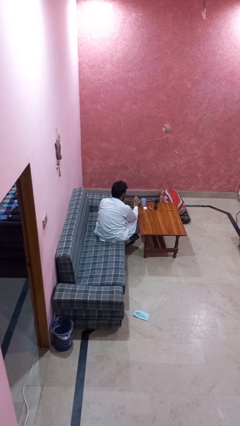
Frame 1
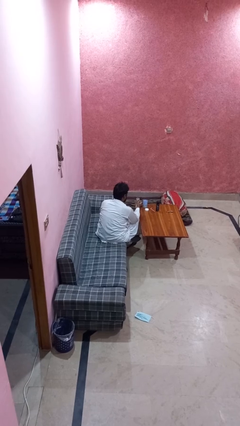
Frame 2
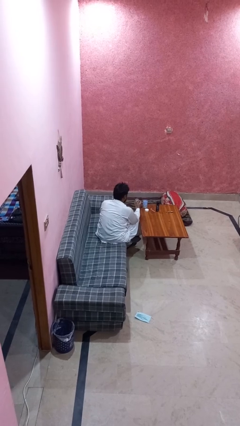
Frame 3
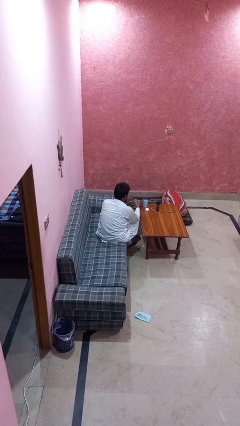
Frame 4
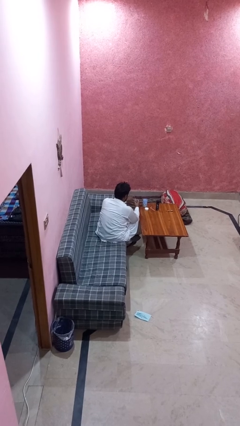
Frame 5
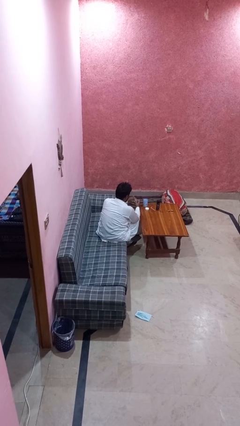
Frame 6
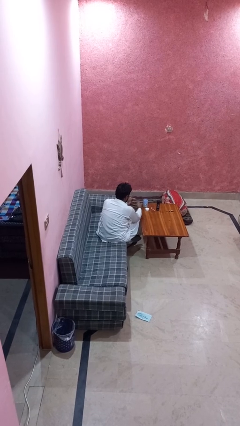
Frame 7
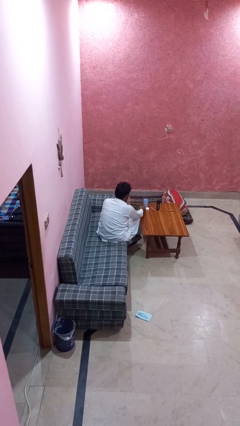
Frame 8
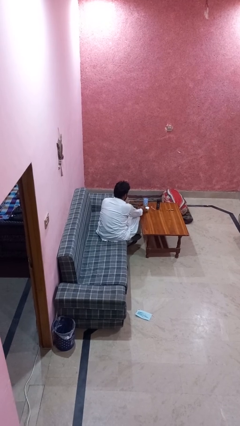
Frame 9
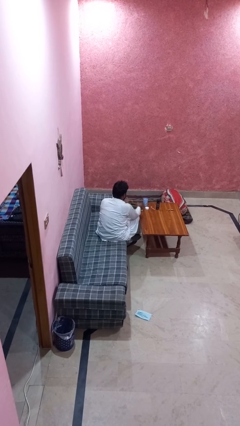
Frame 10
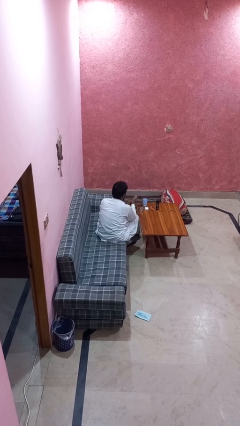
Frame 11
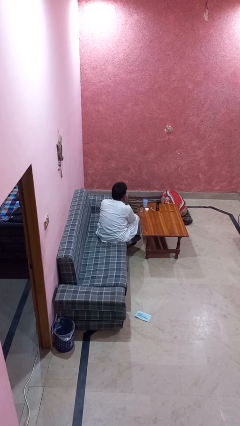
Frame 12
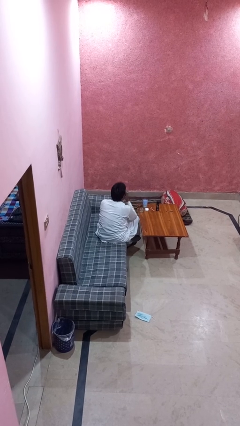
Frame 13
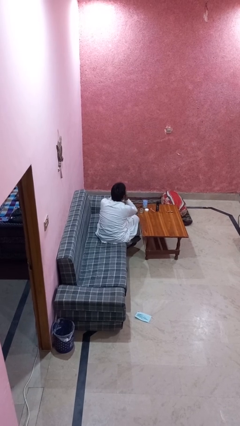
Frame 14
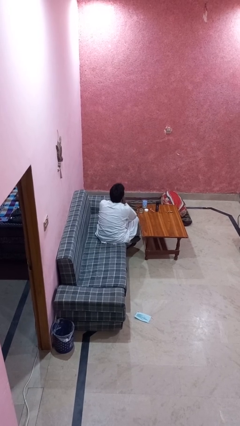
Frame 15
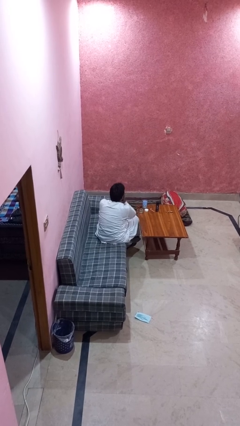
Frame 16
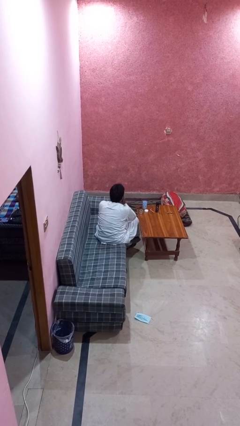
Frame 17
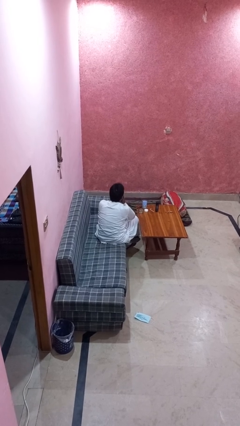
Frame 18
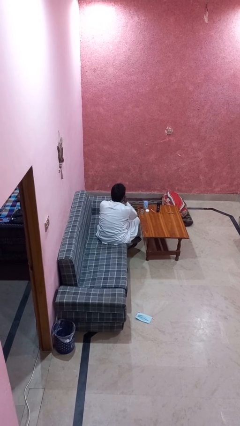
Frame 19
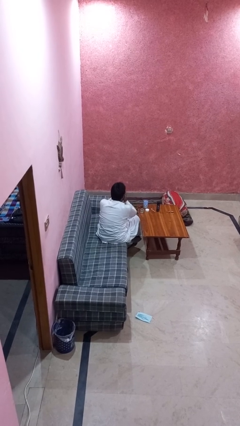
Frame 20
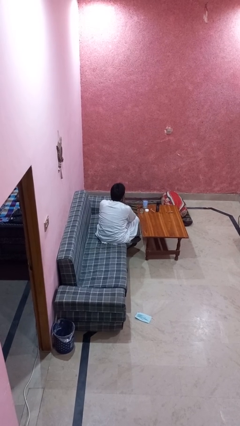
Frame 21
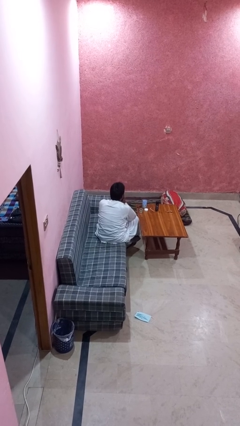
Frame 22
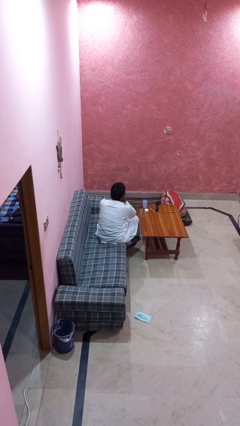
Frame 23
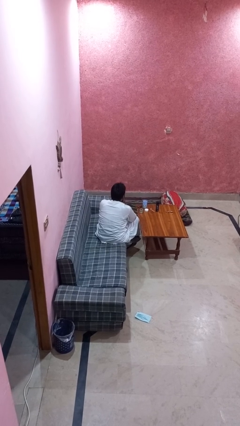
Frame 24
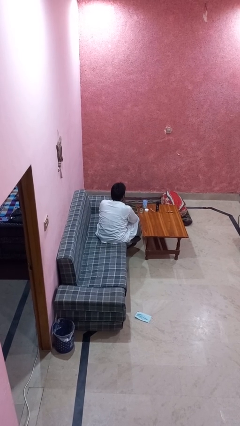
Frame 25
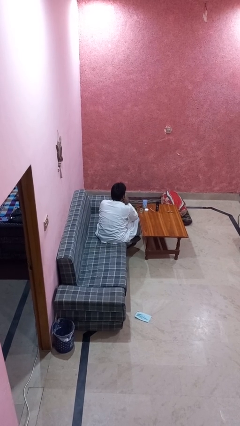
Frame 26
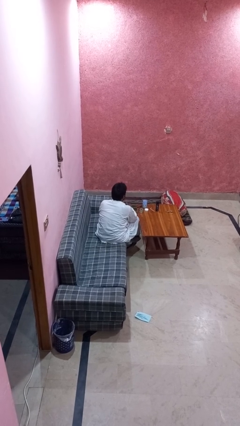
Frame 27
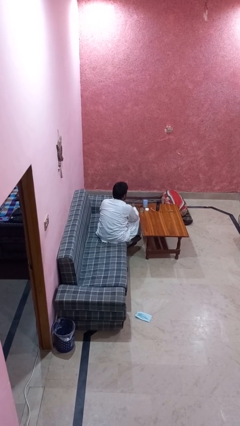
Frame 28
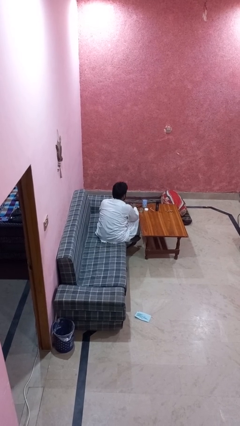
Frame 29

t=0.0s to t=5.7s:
person applies facial moisturizer

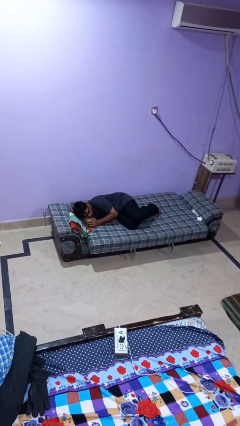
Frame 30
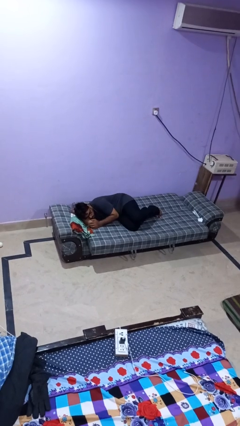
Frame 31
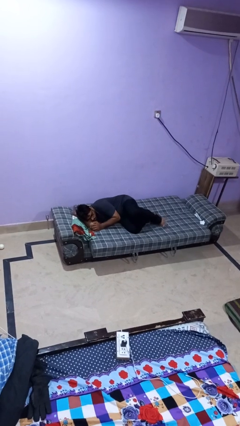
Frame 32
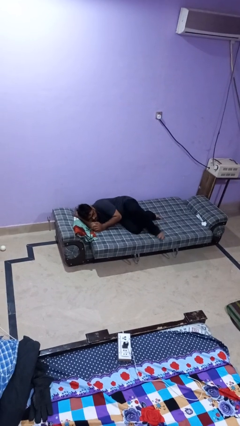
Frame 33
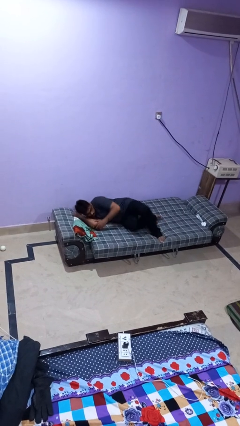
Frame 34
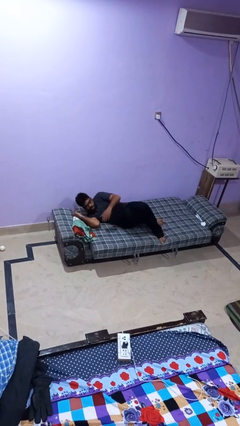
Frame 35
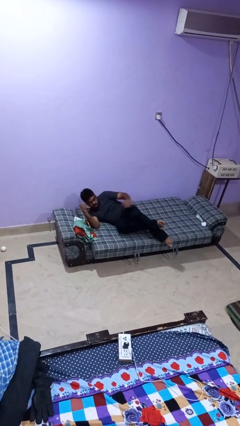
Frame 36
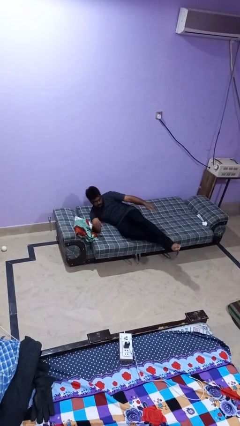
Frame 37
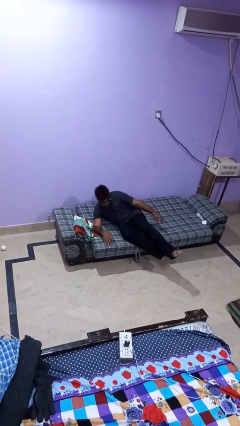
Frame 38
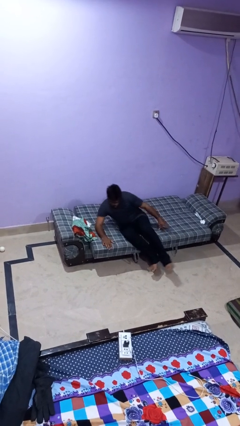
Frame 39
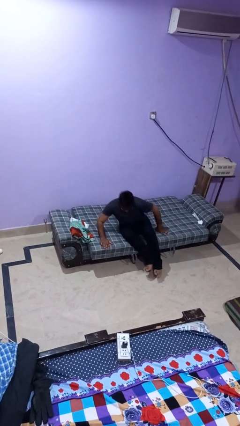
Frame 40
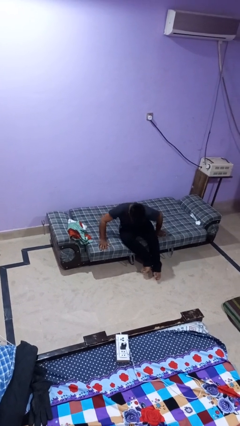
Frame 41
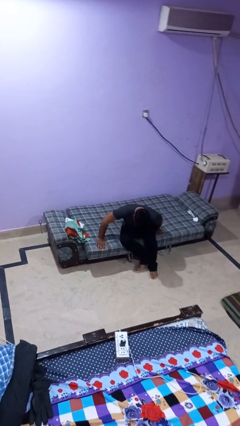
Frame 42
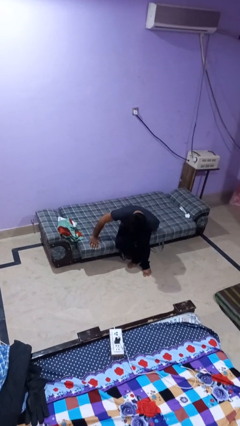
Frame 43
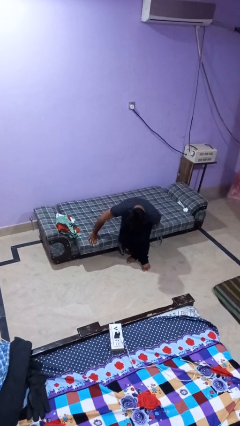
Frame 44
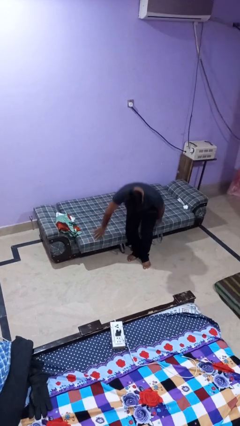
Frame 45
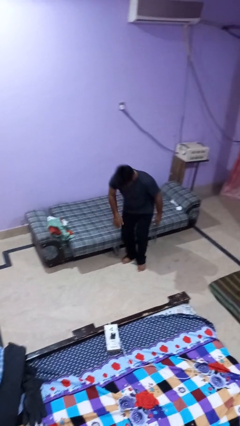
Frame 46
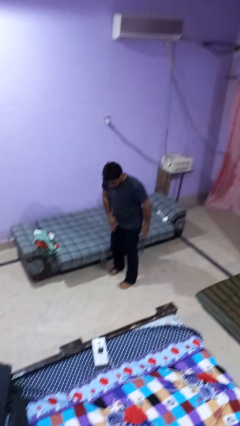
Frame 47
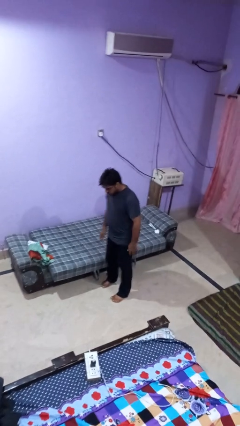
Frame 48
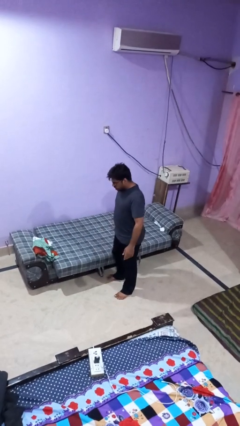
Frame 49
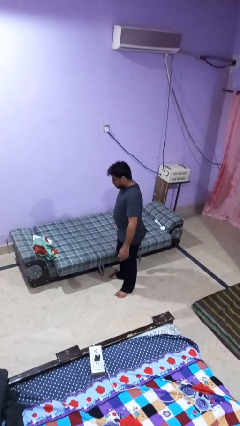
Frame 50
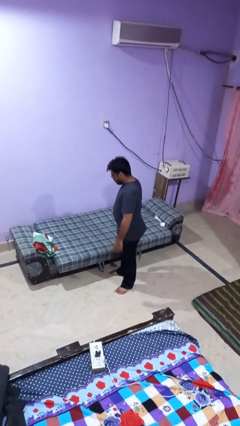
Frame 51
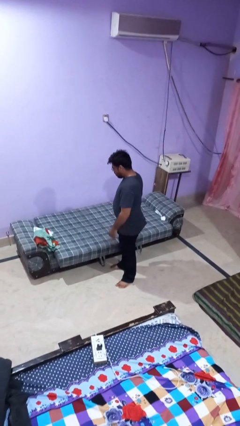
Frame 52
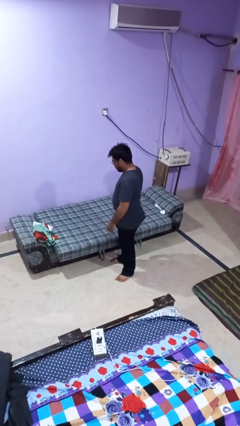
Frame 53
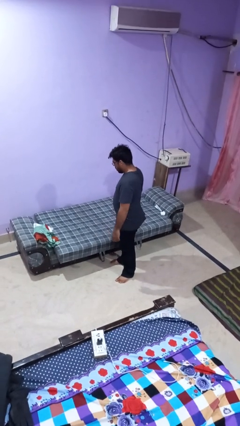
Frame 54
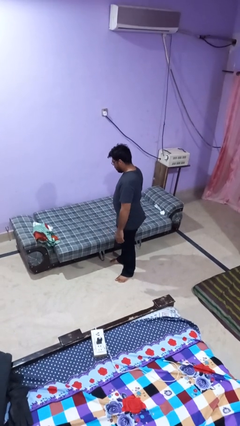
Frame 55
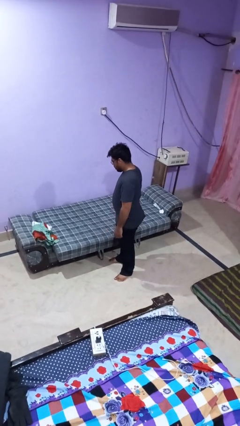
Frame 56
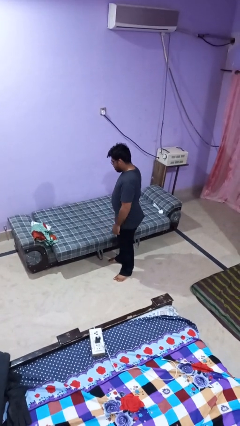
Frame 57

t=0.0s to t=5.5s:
person stands up

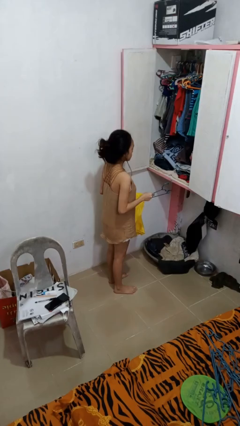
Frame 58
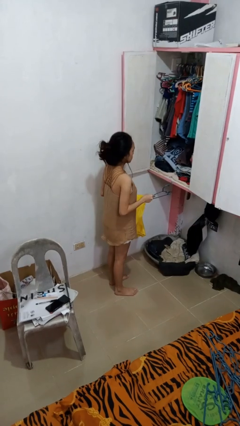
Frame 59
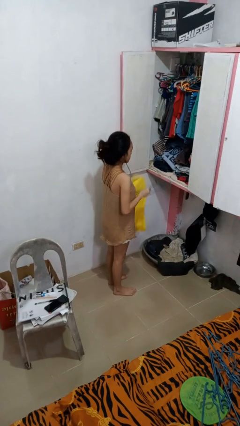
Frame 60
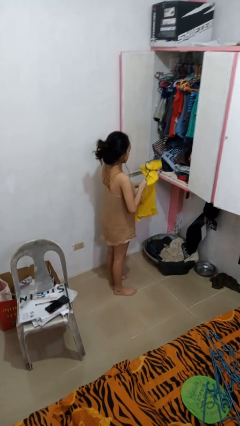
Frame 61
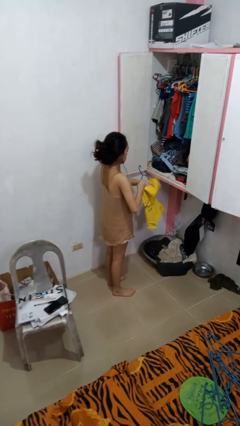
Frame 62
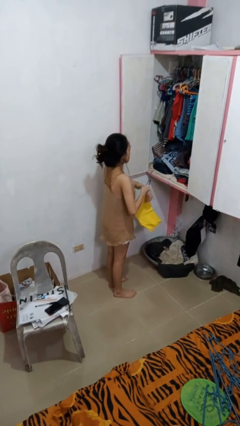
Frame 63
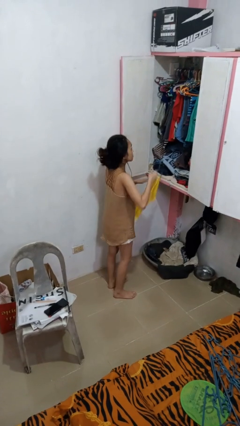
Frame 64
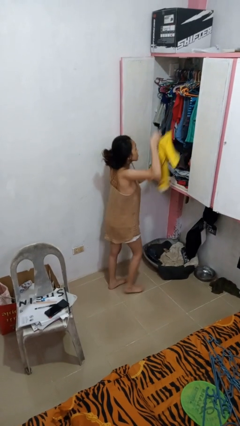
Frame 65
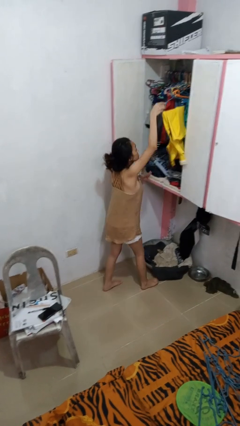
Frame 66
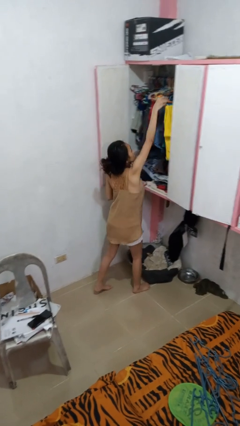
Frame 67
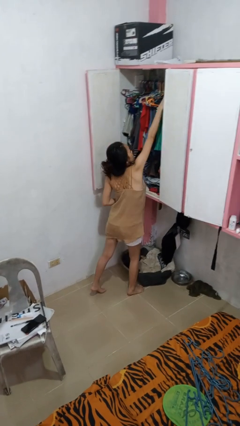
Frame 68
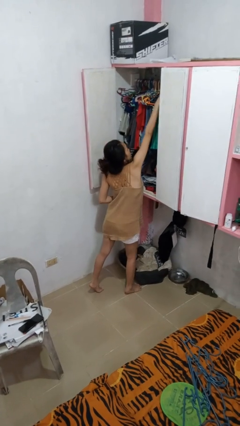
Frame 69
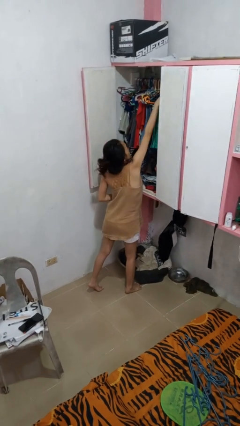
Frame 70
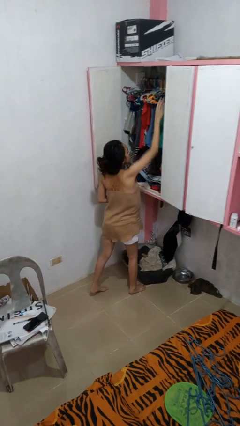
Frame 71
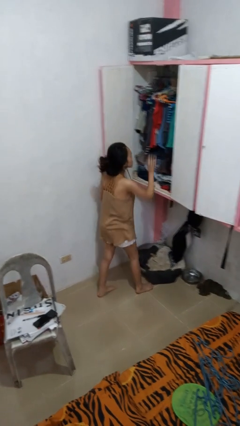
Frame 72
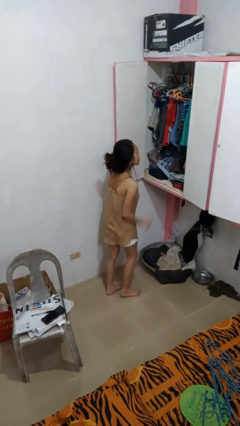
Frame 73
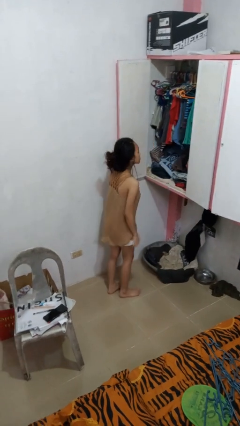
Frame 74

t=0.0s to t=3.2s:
person puts clothes into closet

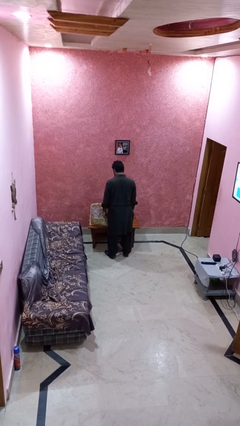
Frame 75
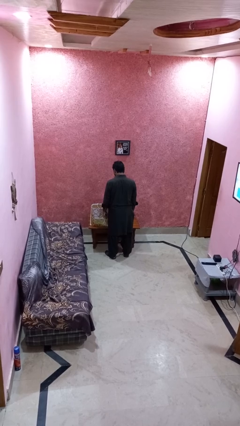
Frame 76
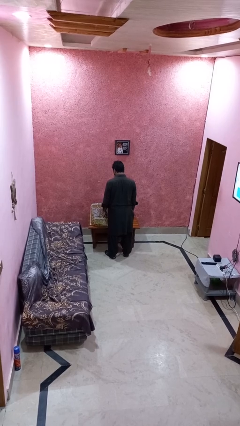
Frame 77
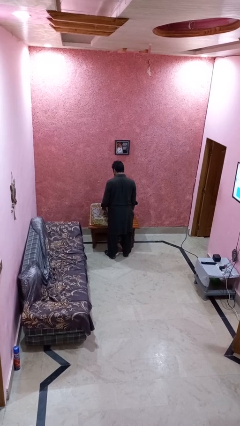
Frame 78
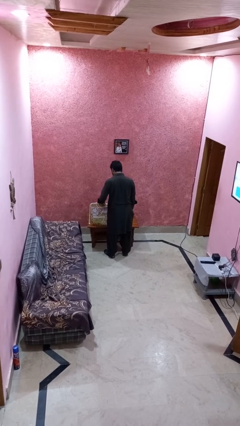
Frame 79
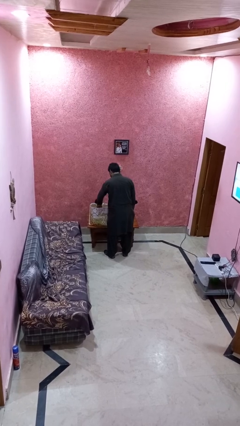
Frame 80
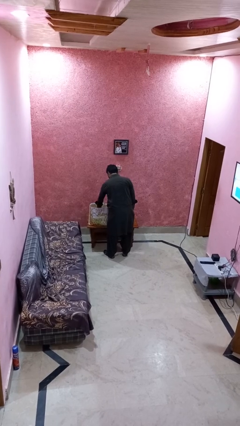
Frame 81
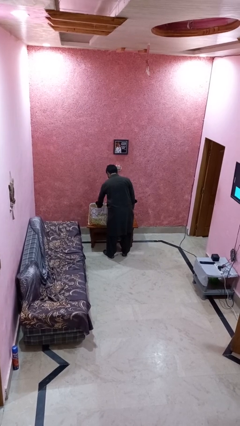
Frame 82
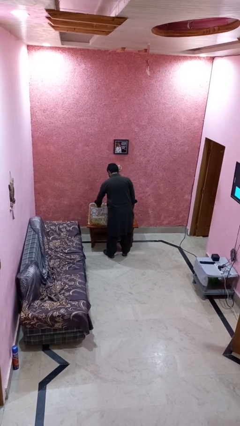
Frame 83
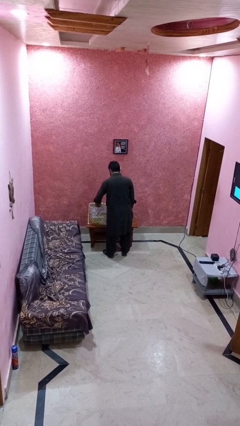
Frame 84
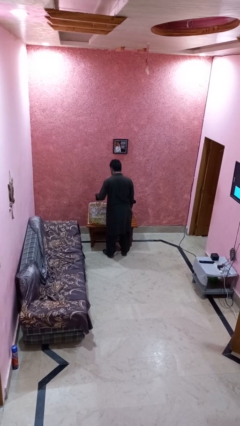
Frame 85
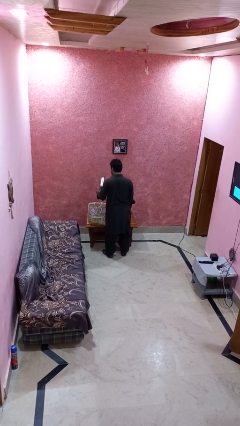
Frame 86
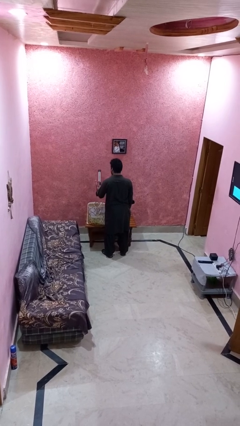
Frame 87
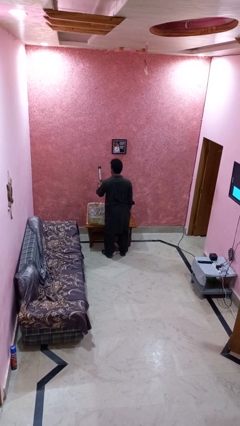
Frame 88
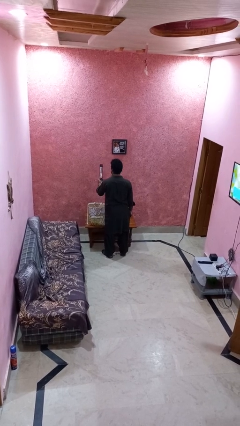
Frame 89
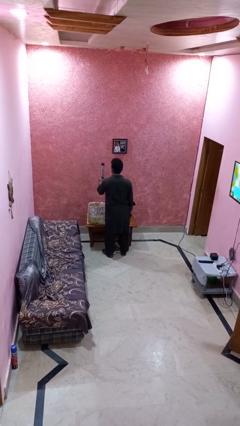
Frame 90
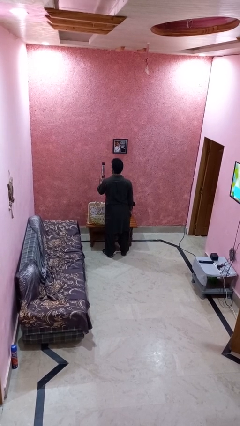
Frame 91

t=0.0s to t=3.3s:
person takes object from bag
